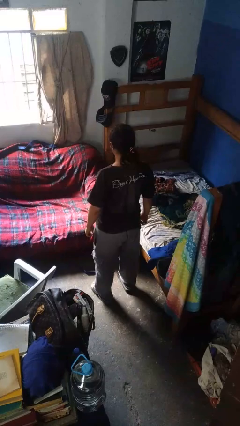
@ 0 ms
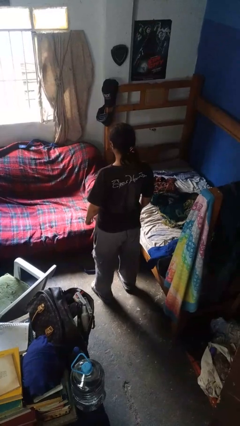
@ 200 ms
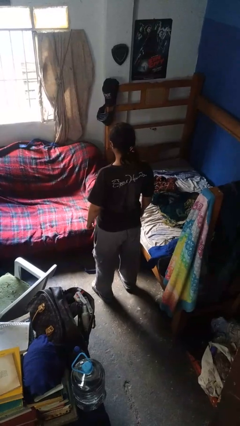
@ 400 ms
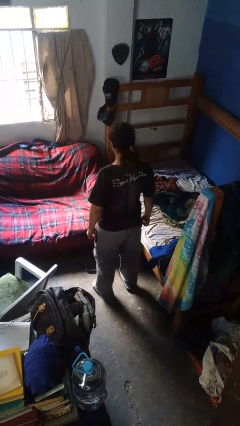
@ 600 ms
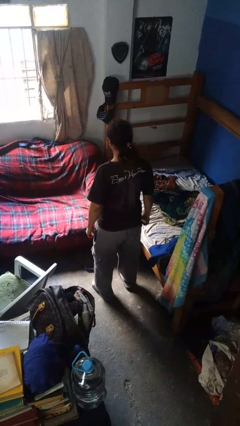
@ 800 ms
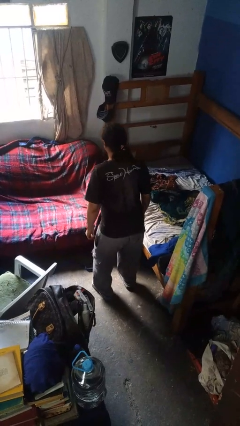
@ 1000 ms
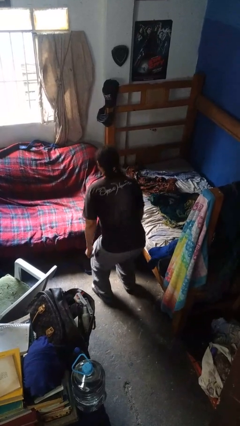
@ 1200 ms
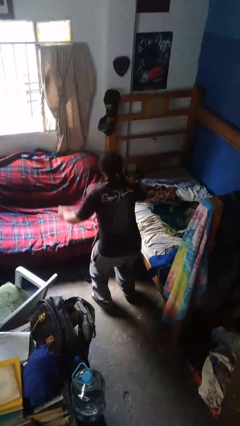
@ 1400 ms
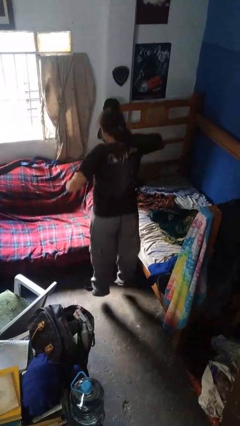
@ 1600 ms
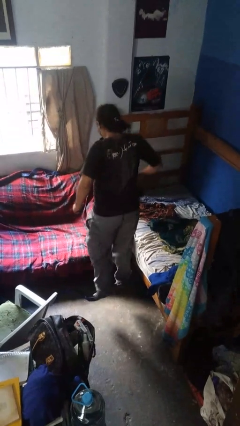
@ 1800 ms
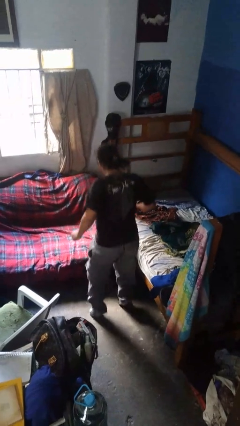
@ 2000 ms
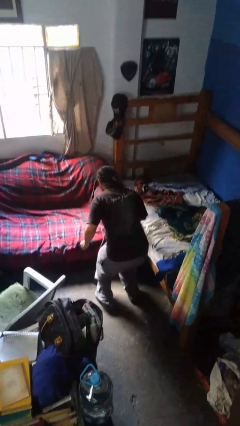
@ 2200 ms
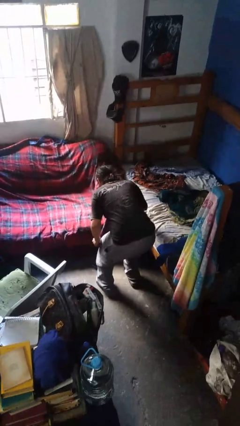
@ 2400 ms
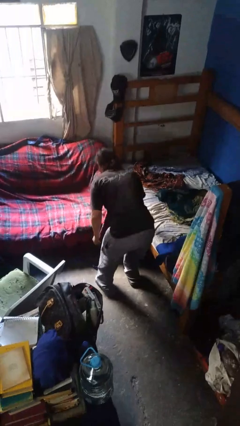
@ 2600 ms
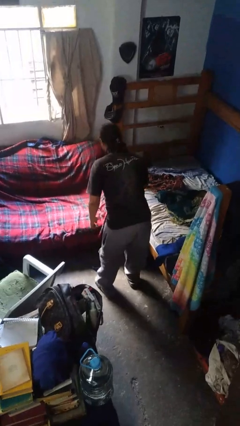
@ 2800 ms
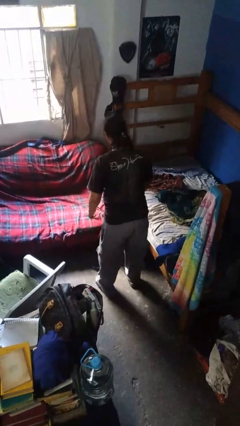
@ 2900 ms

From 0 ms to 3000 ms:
person jumps

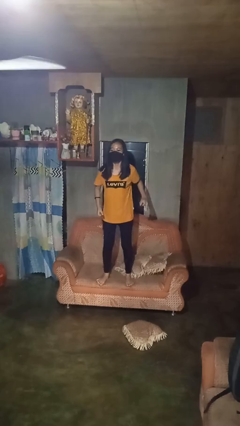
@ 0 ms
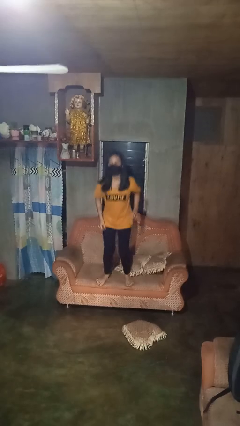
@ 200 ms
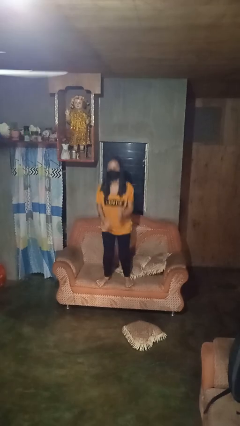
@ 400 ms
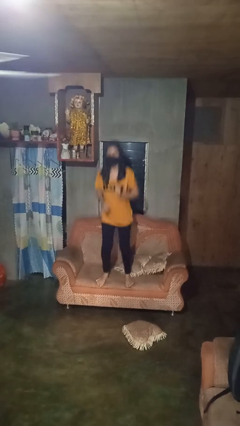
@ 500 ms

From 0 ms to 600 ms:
person jumps on couch

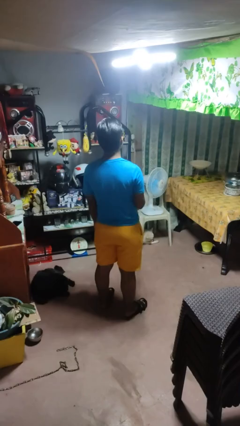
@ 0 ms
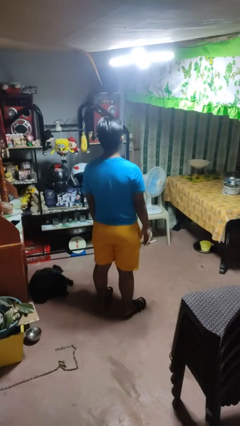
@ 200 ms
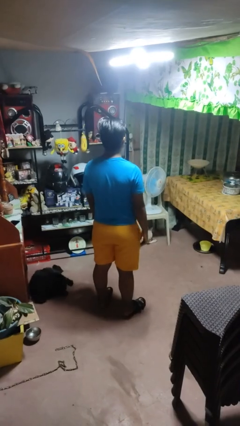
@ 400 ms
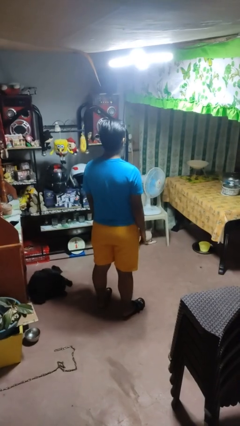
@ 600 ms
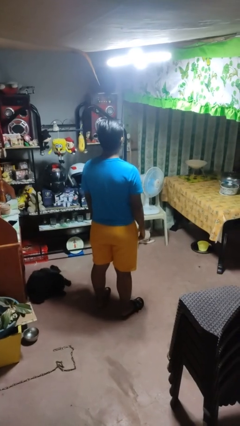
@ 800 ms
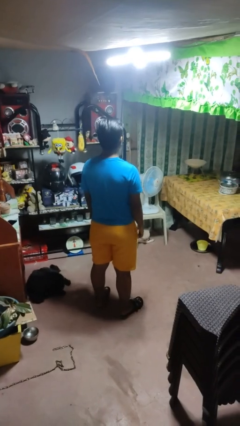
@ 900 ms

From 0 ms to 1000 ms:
person gestures lower hand

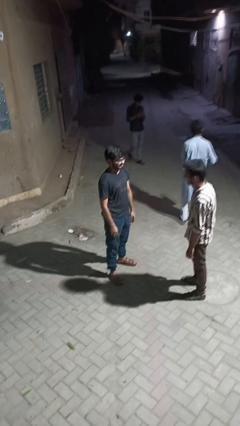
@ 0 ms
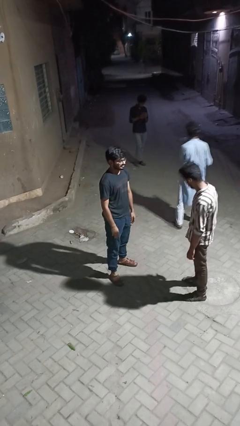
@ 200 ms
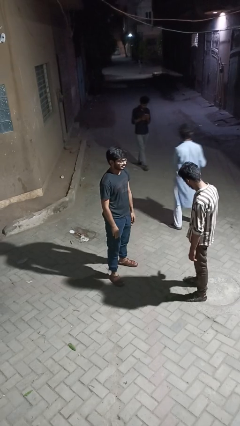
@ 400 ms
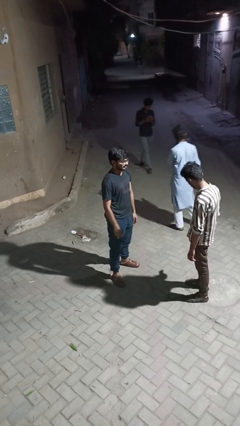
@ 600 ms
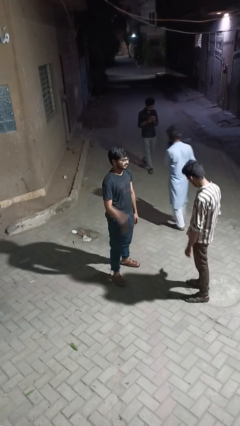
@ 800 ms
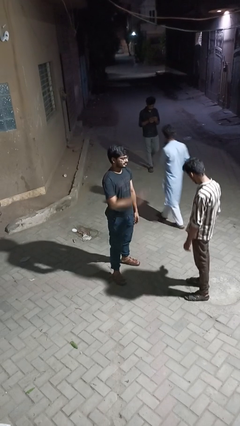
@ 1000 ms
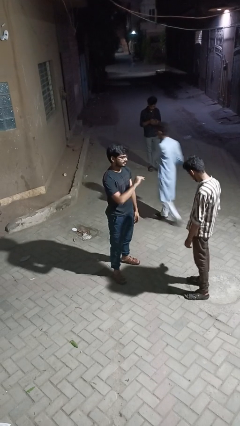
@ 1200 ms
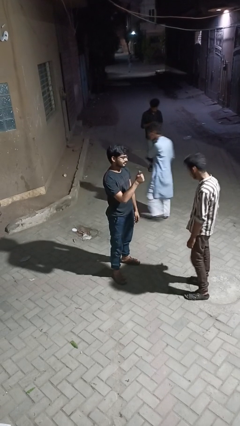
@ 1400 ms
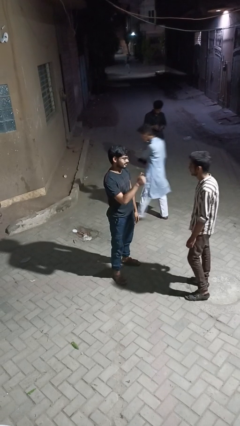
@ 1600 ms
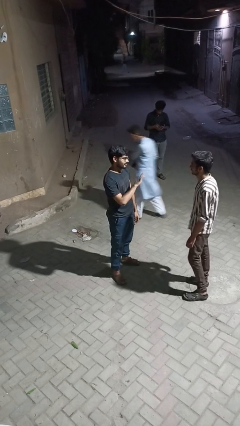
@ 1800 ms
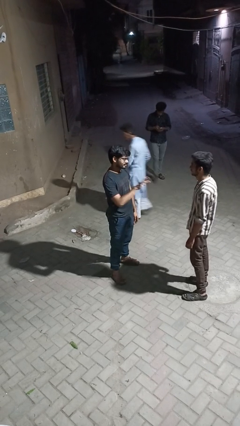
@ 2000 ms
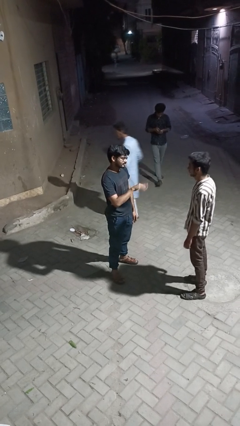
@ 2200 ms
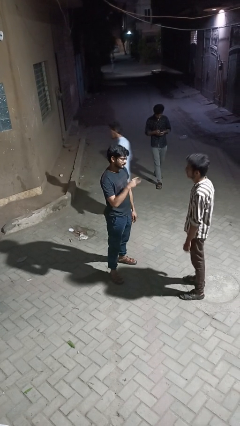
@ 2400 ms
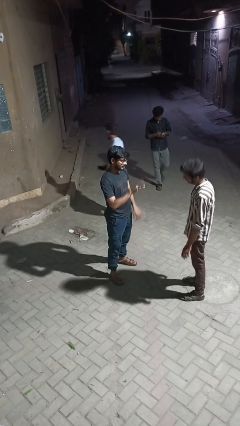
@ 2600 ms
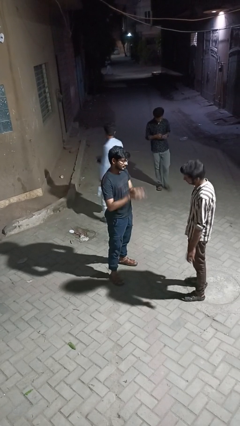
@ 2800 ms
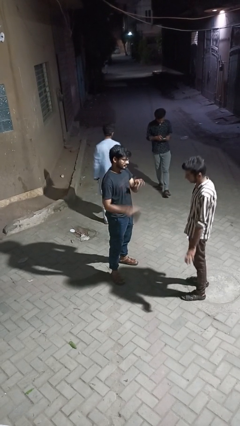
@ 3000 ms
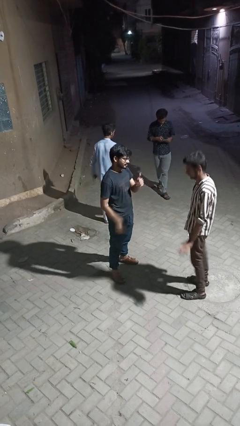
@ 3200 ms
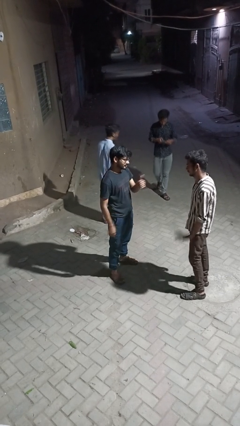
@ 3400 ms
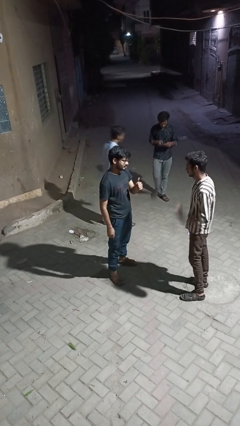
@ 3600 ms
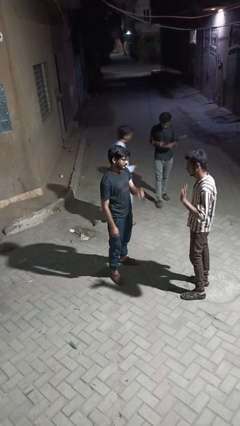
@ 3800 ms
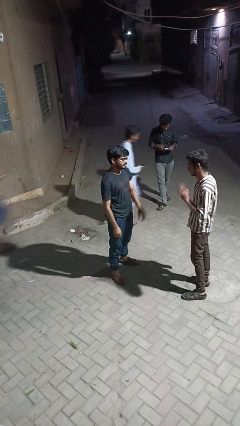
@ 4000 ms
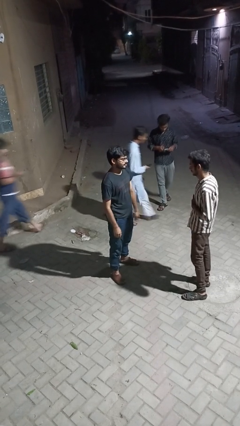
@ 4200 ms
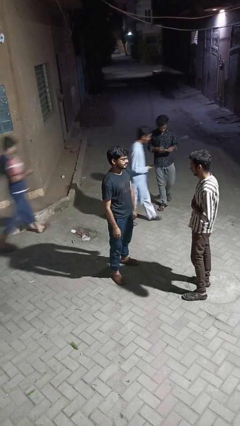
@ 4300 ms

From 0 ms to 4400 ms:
person talks to person

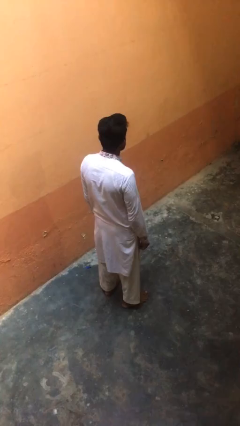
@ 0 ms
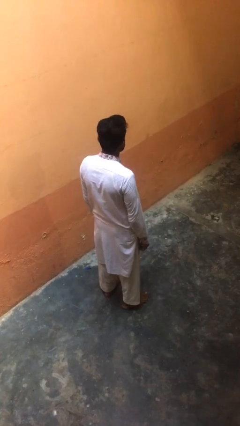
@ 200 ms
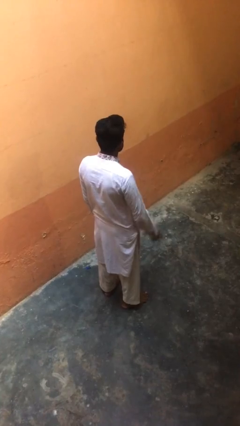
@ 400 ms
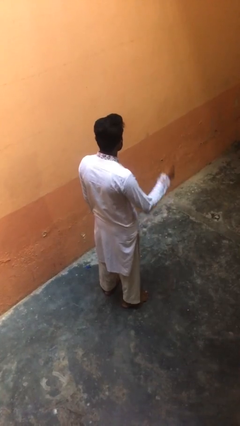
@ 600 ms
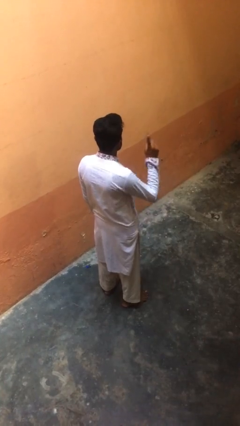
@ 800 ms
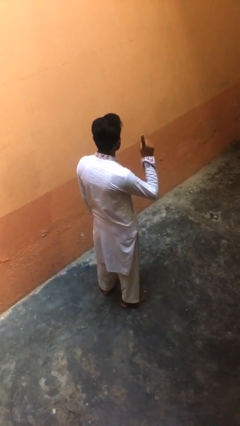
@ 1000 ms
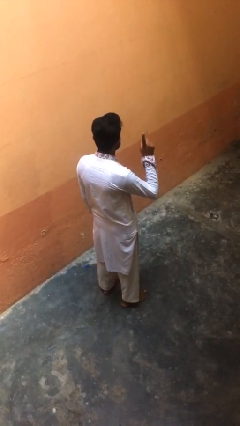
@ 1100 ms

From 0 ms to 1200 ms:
person gestures number one

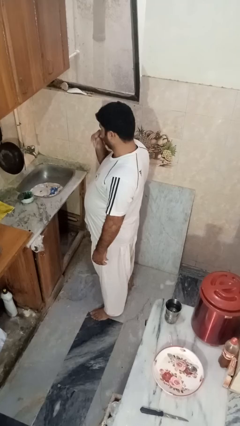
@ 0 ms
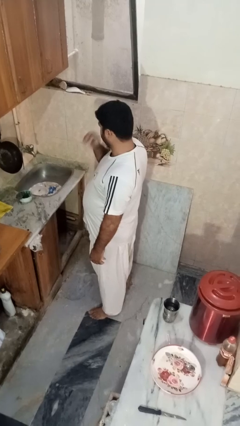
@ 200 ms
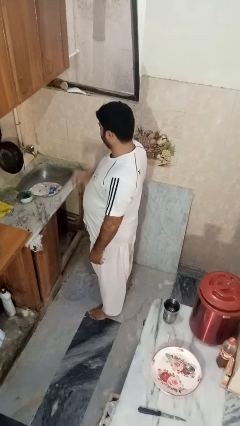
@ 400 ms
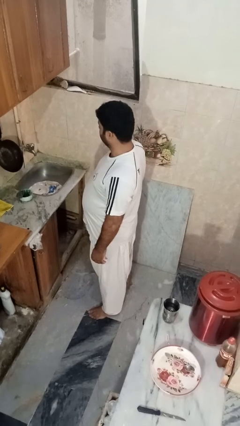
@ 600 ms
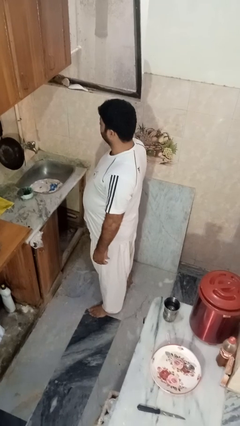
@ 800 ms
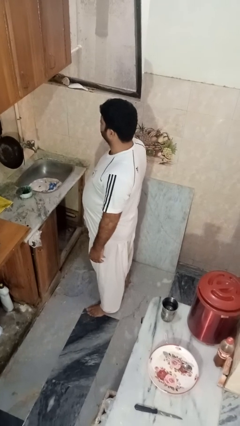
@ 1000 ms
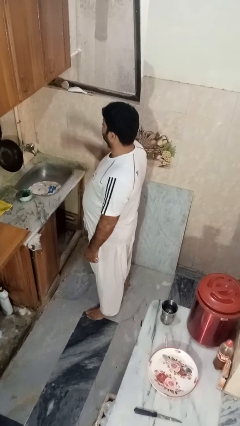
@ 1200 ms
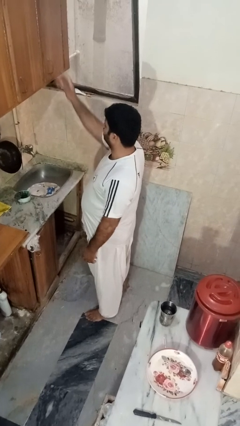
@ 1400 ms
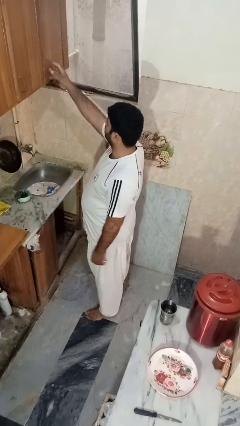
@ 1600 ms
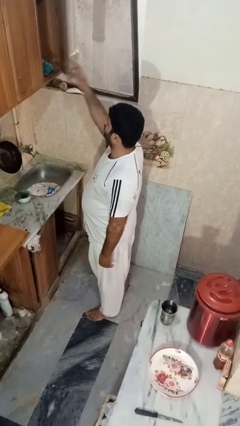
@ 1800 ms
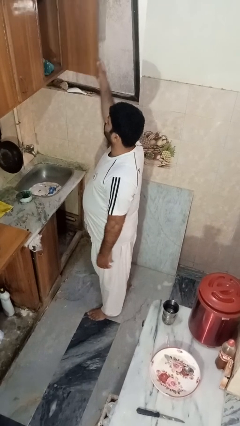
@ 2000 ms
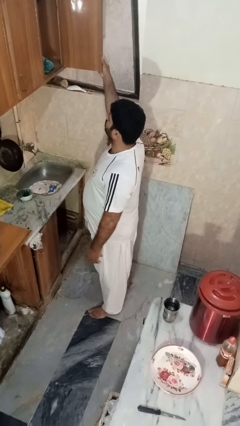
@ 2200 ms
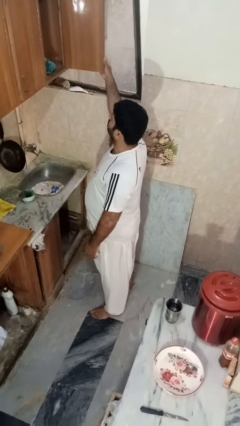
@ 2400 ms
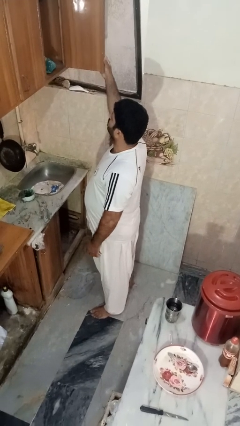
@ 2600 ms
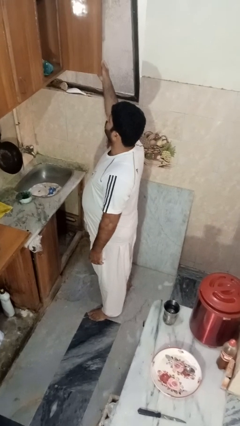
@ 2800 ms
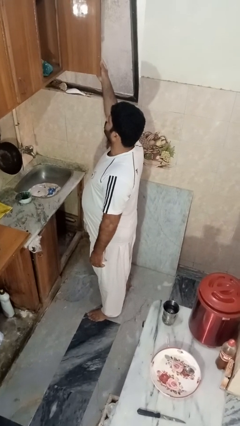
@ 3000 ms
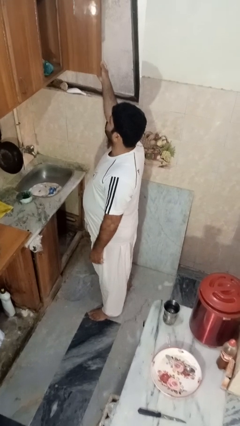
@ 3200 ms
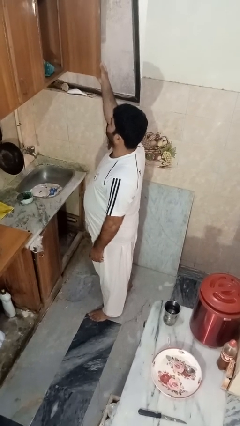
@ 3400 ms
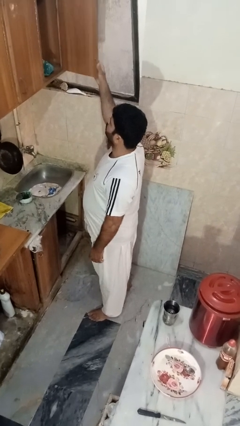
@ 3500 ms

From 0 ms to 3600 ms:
person opens cabinet

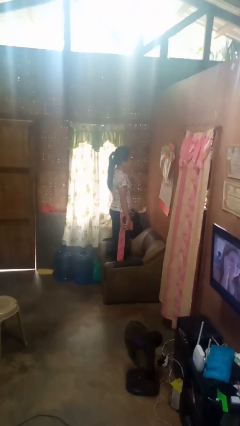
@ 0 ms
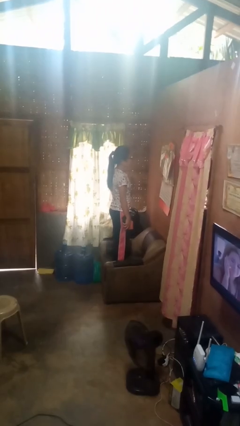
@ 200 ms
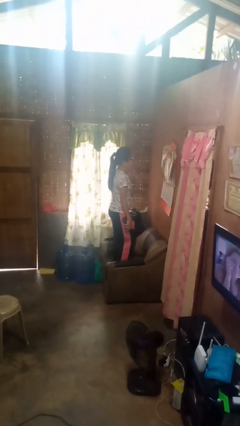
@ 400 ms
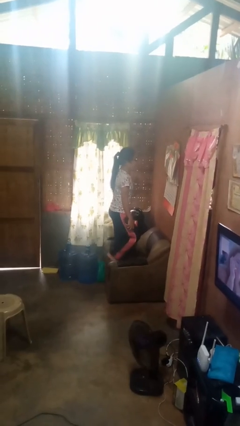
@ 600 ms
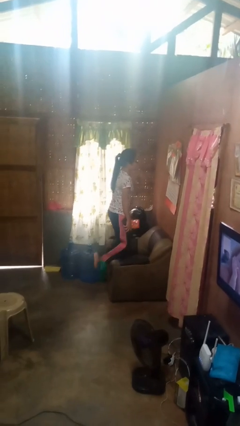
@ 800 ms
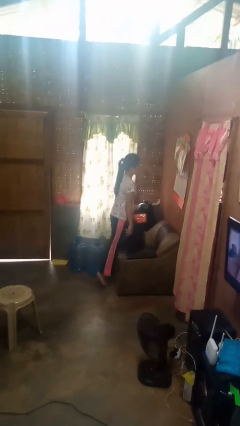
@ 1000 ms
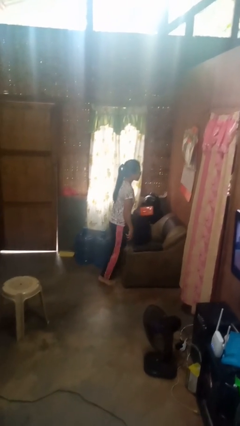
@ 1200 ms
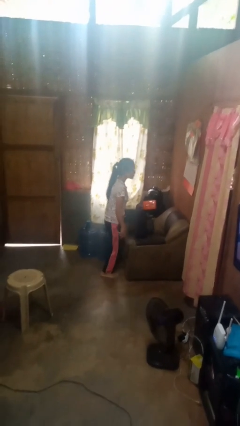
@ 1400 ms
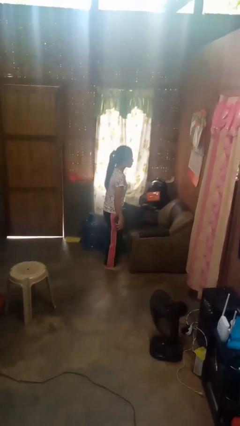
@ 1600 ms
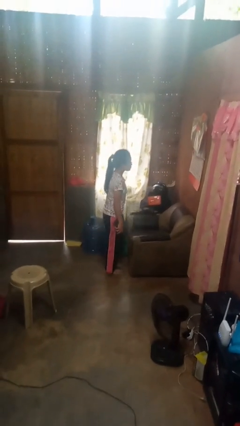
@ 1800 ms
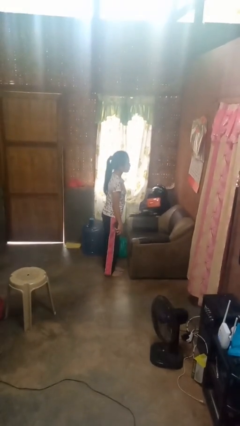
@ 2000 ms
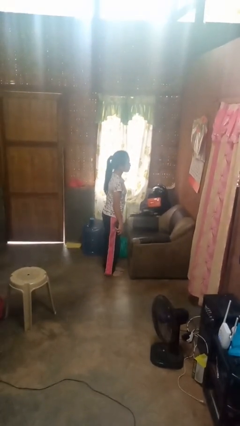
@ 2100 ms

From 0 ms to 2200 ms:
person climbs off couch

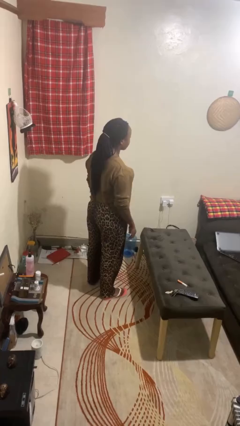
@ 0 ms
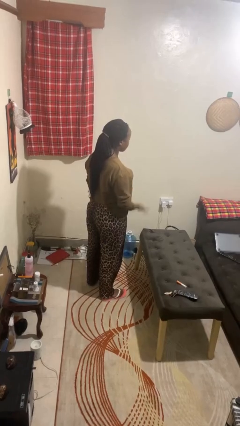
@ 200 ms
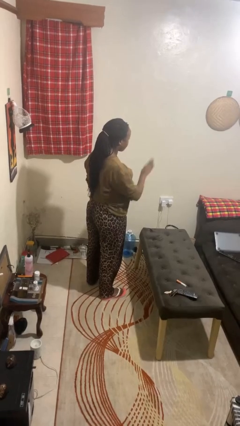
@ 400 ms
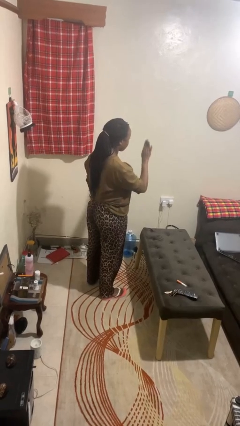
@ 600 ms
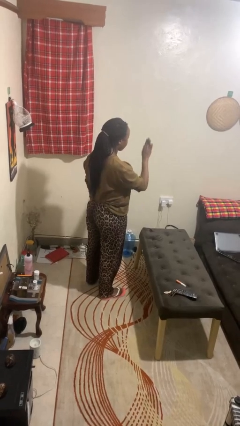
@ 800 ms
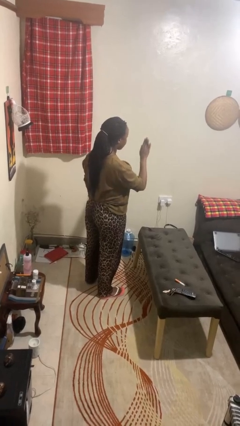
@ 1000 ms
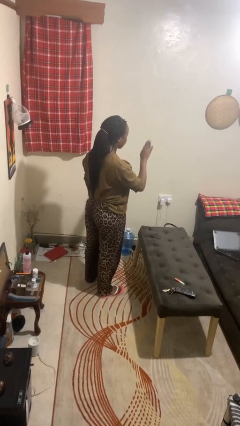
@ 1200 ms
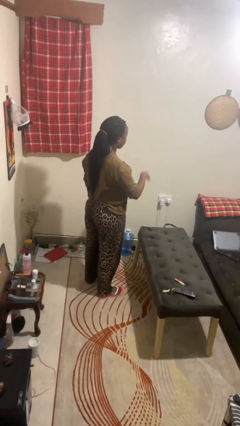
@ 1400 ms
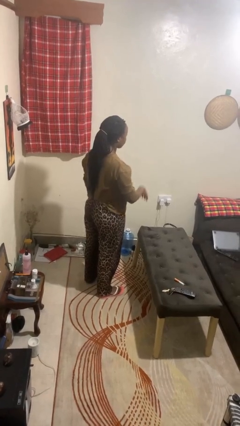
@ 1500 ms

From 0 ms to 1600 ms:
person gestures stop
